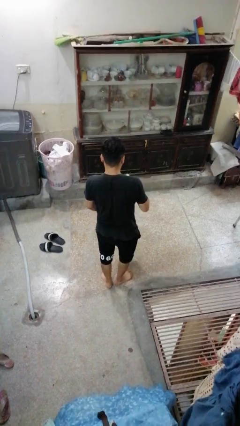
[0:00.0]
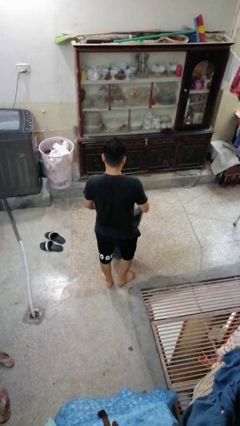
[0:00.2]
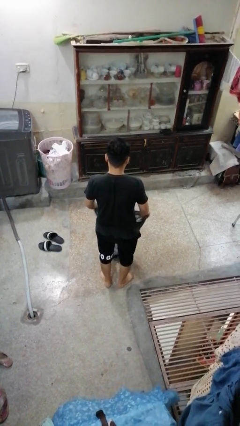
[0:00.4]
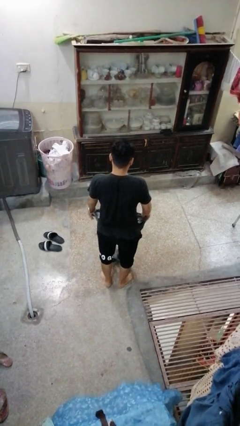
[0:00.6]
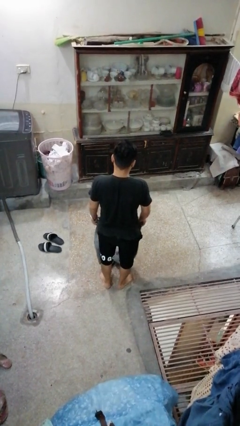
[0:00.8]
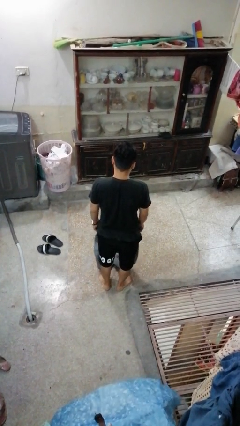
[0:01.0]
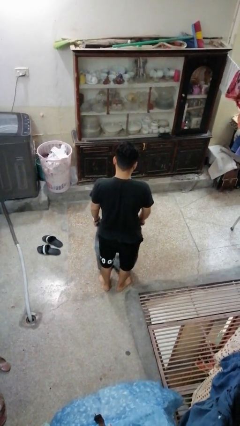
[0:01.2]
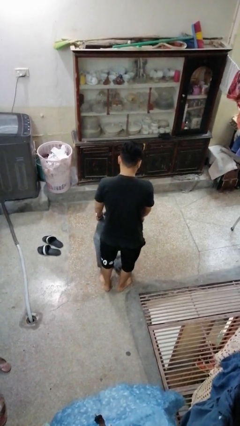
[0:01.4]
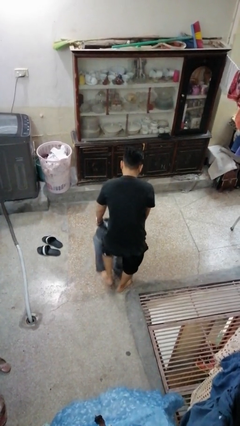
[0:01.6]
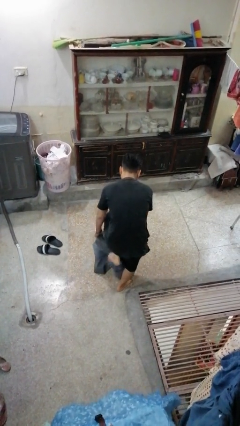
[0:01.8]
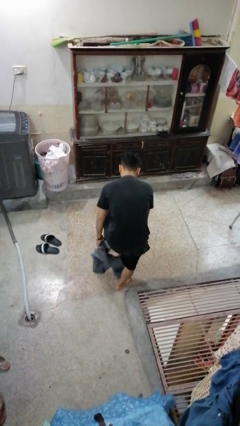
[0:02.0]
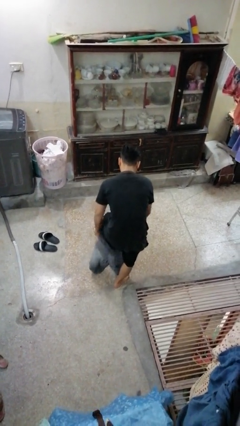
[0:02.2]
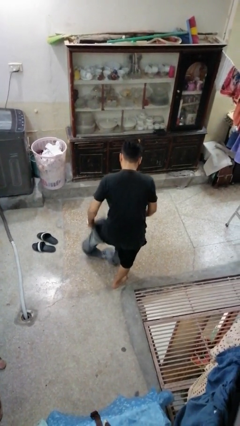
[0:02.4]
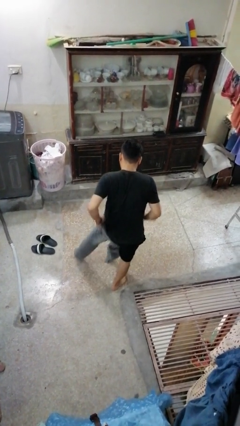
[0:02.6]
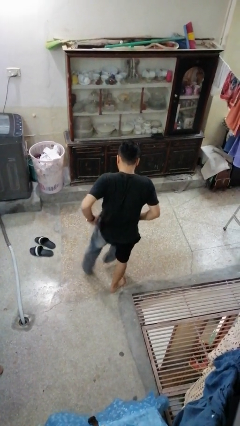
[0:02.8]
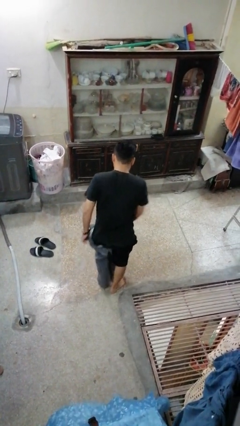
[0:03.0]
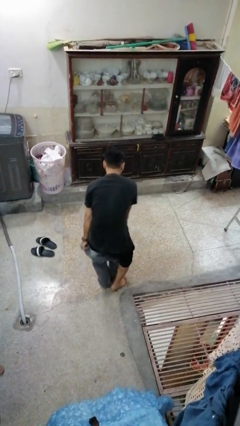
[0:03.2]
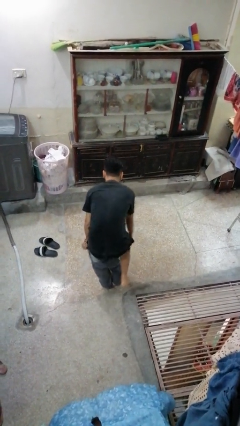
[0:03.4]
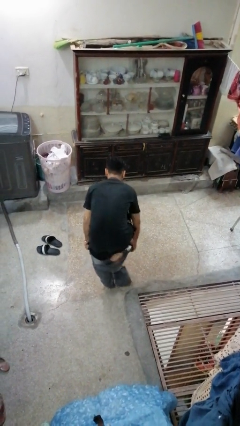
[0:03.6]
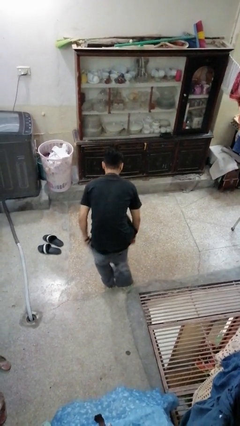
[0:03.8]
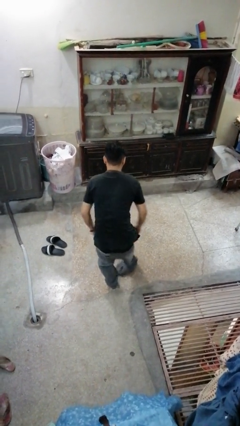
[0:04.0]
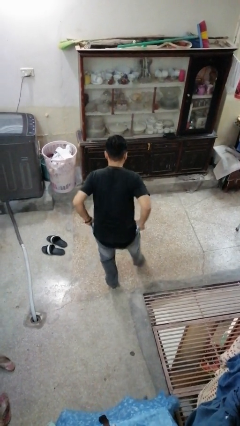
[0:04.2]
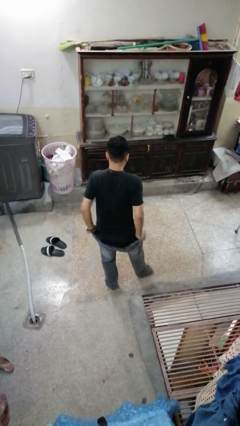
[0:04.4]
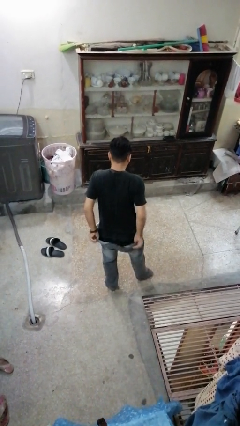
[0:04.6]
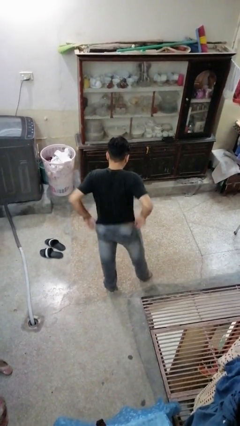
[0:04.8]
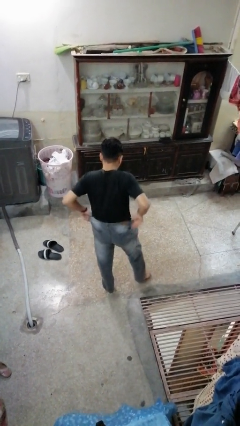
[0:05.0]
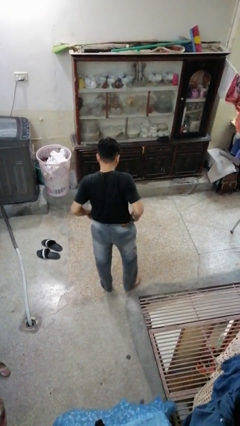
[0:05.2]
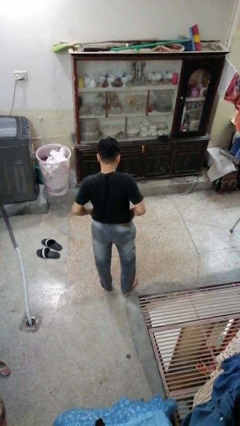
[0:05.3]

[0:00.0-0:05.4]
person puts on pants

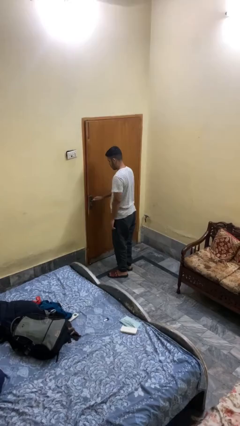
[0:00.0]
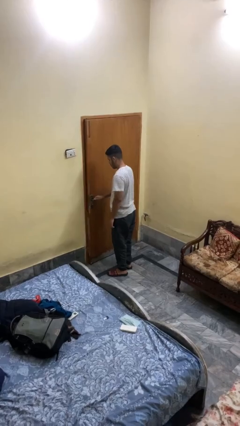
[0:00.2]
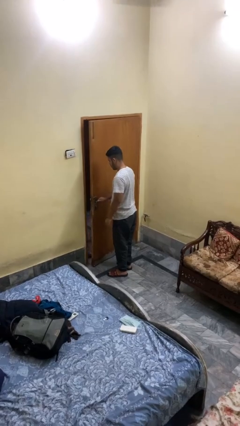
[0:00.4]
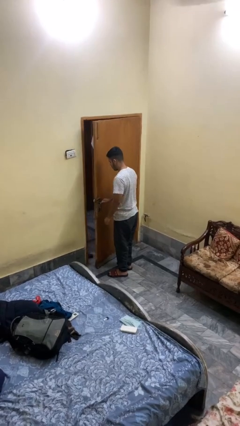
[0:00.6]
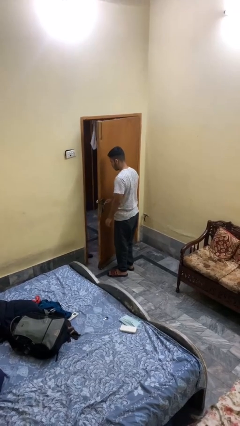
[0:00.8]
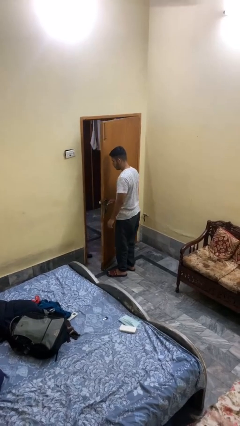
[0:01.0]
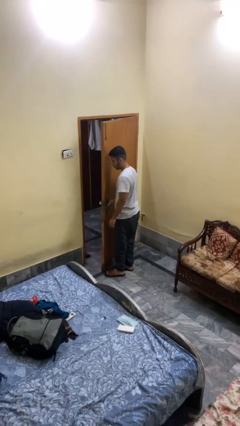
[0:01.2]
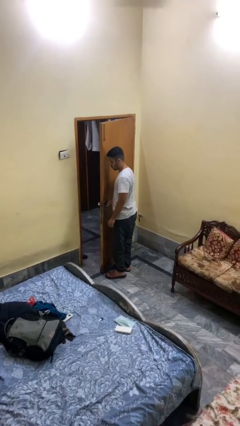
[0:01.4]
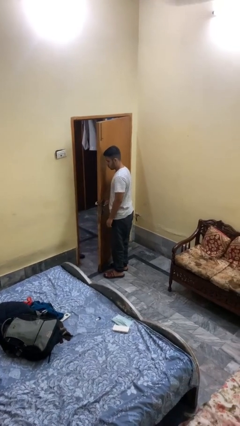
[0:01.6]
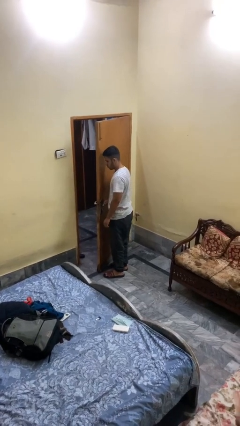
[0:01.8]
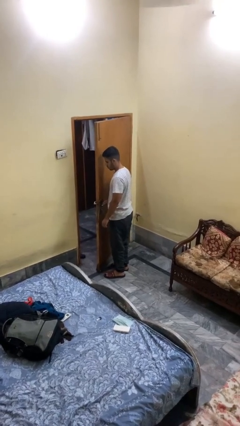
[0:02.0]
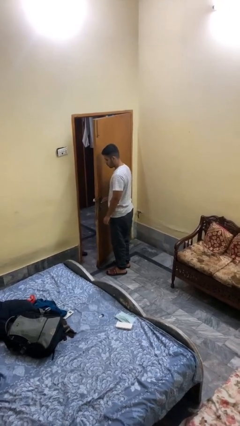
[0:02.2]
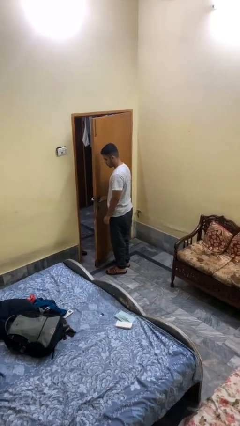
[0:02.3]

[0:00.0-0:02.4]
person opens facility door

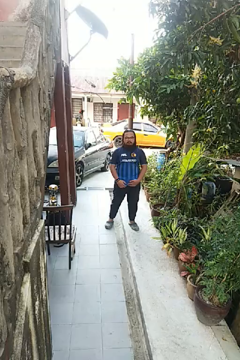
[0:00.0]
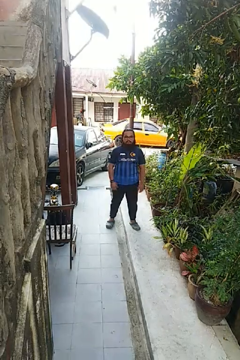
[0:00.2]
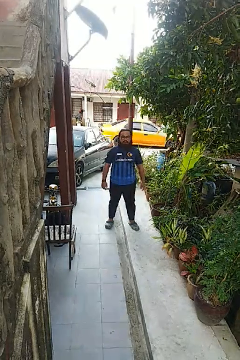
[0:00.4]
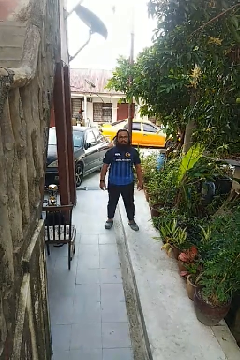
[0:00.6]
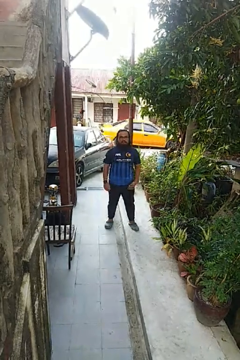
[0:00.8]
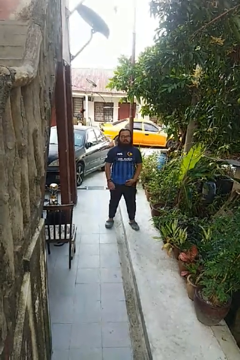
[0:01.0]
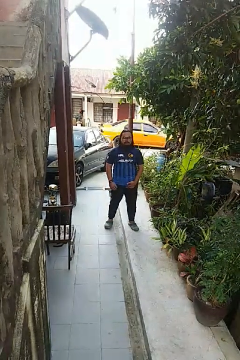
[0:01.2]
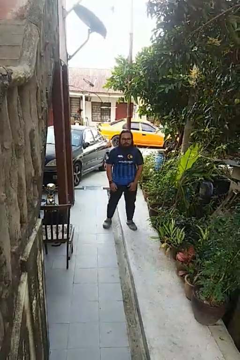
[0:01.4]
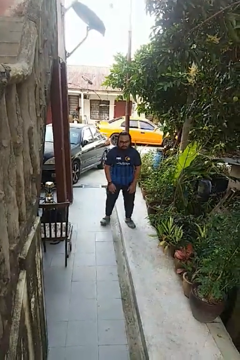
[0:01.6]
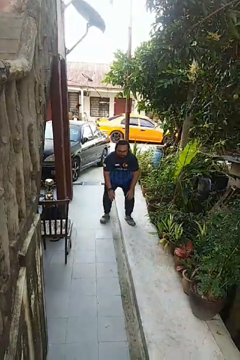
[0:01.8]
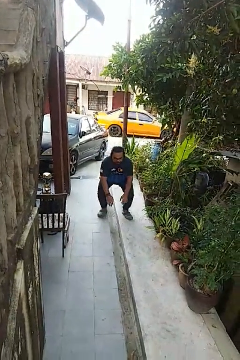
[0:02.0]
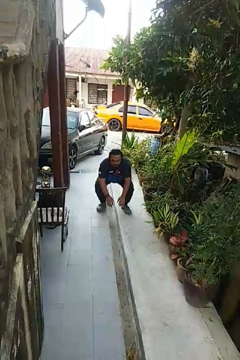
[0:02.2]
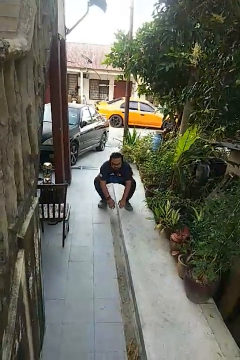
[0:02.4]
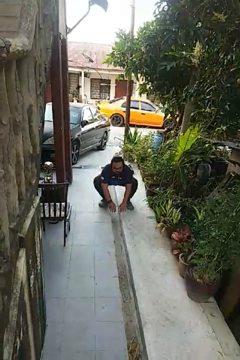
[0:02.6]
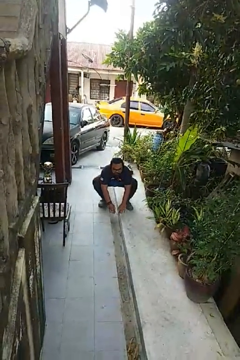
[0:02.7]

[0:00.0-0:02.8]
person squats

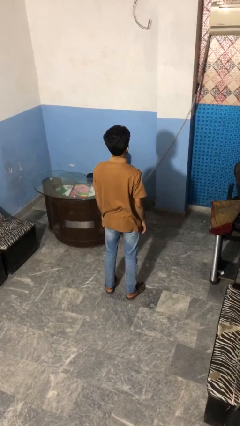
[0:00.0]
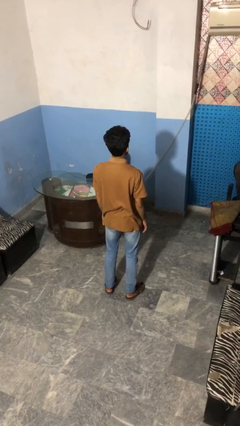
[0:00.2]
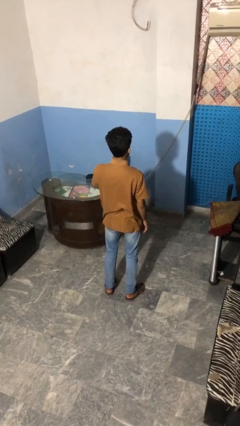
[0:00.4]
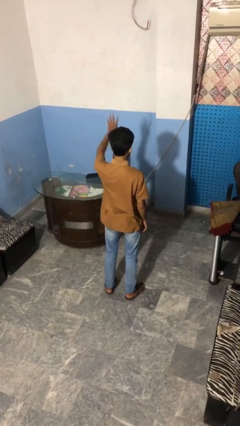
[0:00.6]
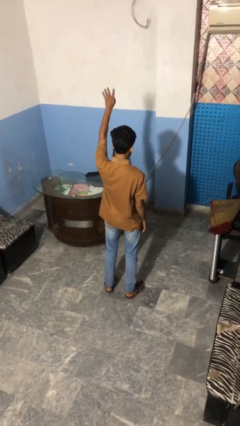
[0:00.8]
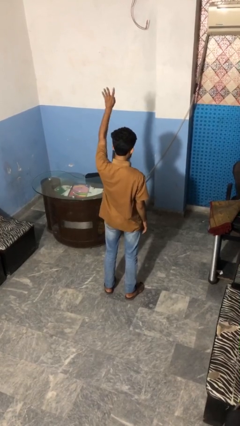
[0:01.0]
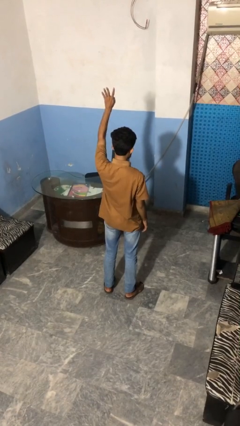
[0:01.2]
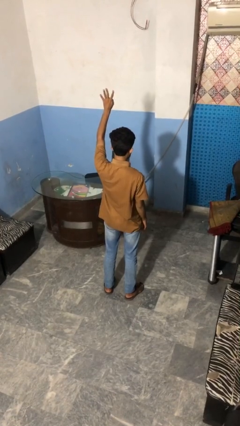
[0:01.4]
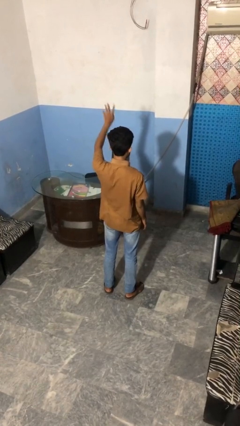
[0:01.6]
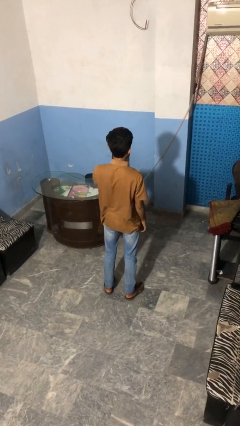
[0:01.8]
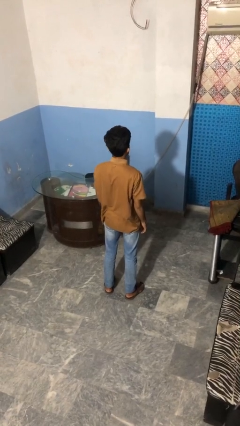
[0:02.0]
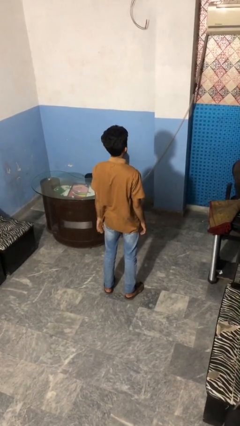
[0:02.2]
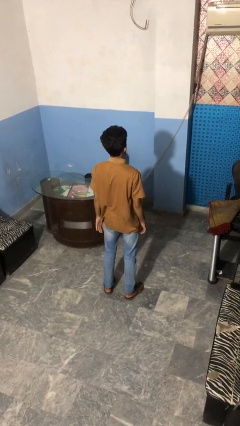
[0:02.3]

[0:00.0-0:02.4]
person gestures number four

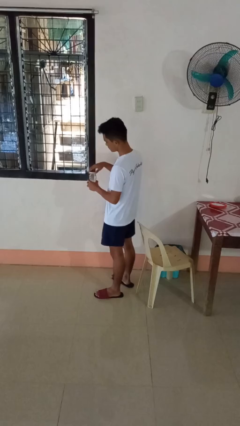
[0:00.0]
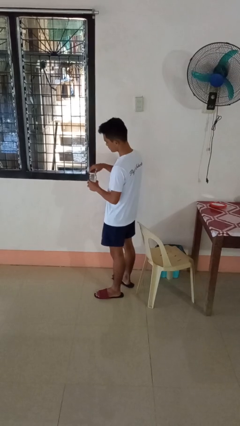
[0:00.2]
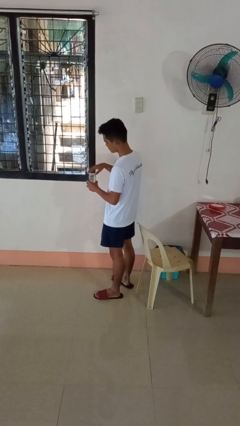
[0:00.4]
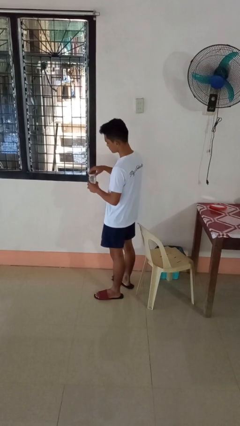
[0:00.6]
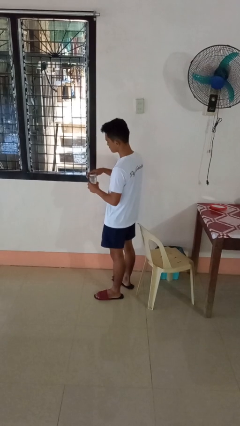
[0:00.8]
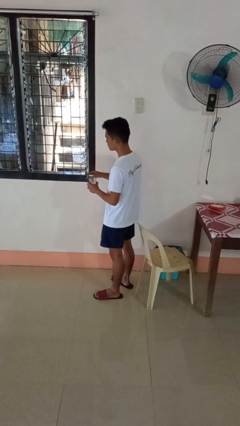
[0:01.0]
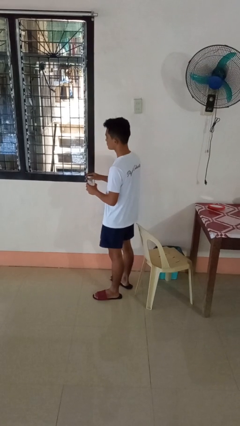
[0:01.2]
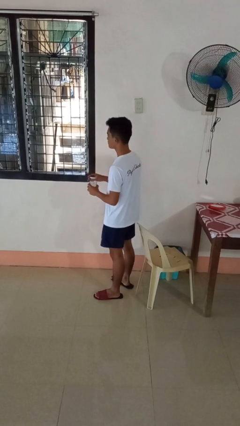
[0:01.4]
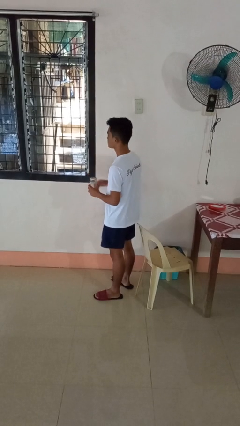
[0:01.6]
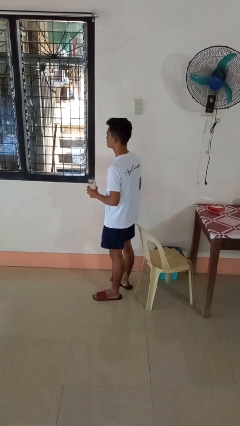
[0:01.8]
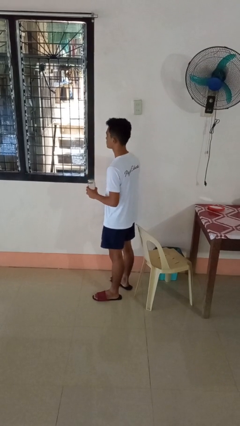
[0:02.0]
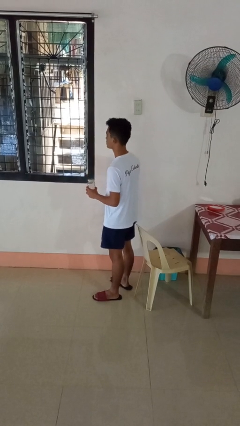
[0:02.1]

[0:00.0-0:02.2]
person closes jar

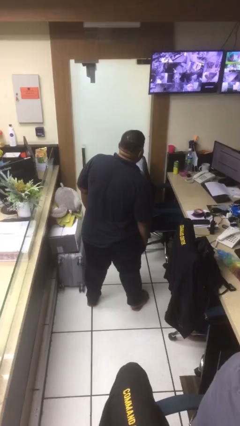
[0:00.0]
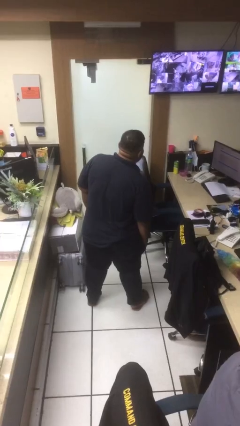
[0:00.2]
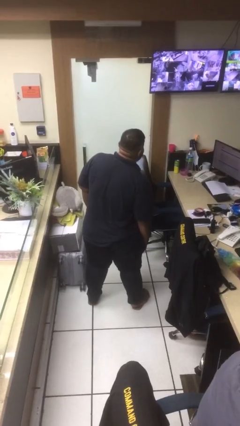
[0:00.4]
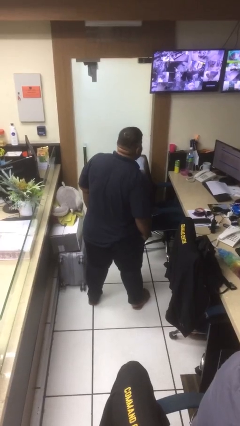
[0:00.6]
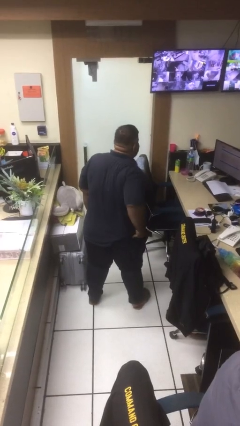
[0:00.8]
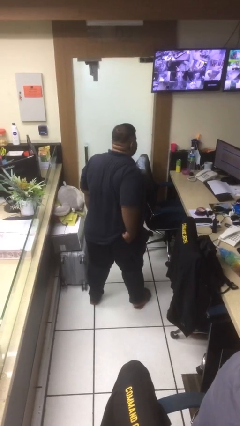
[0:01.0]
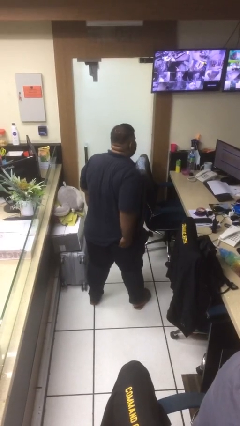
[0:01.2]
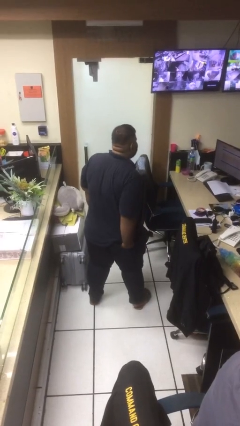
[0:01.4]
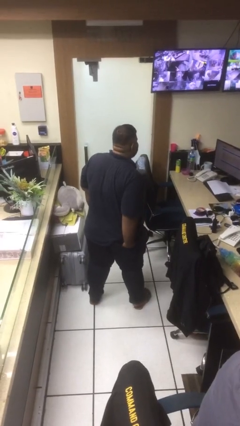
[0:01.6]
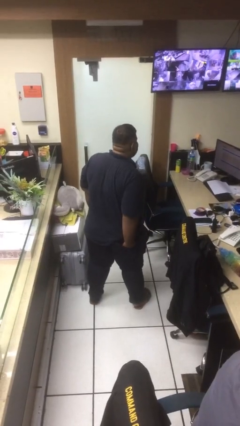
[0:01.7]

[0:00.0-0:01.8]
person puts hands in back pockets

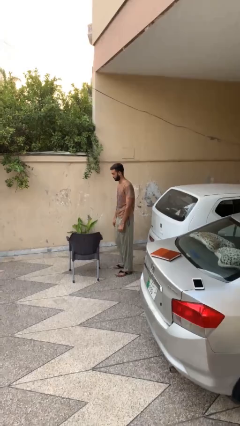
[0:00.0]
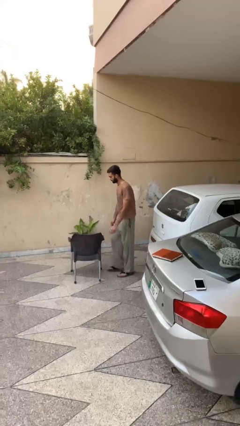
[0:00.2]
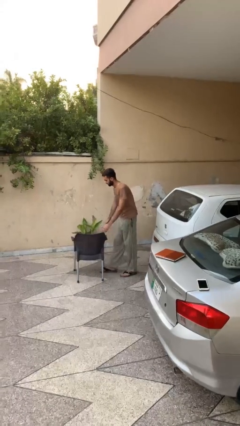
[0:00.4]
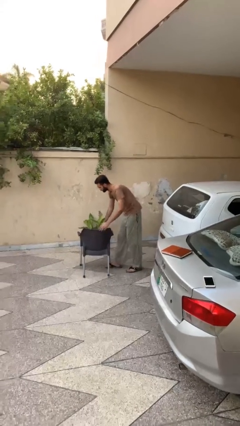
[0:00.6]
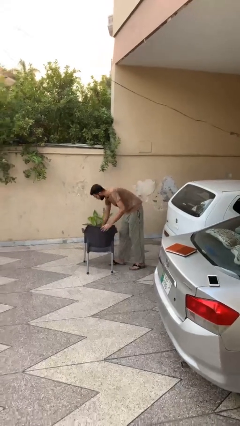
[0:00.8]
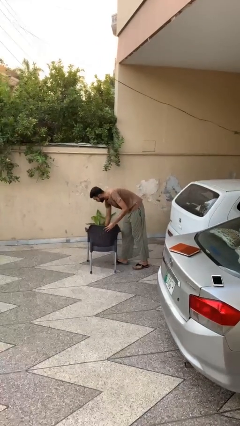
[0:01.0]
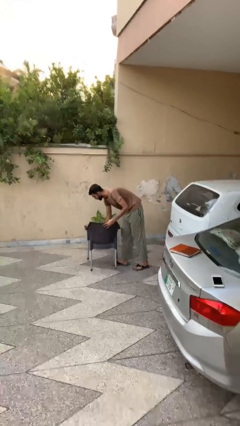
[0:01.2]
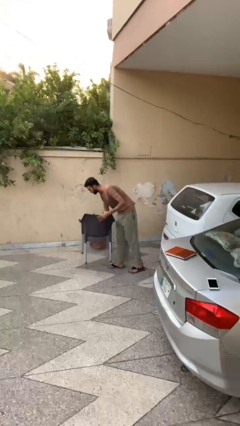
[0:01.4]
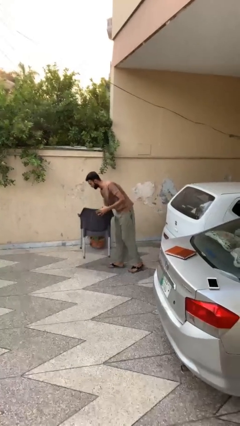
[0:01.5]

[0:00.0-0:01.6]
person picks up object from floor
